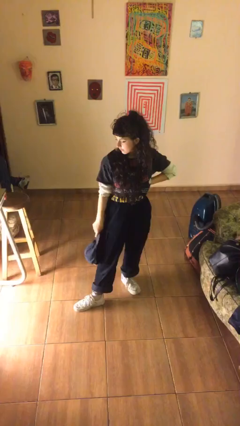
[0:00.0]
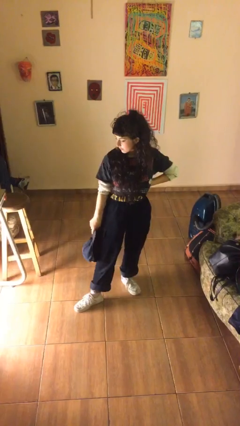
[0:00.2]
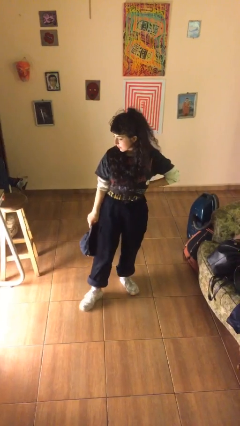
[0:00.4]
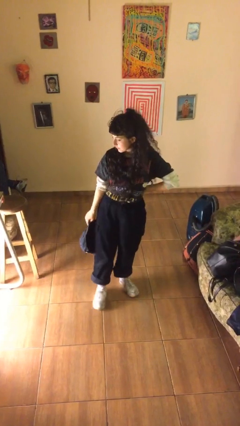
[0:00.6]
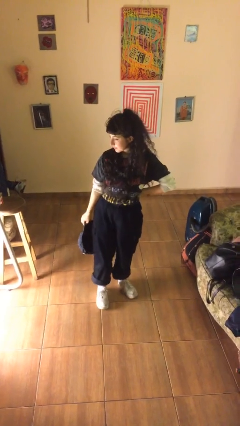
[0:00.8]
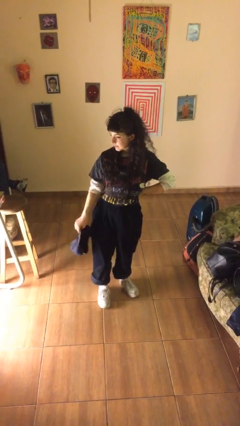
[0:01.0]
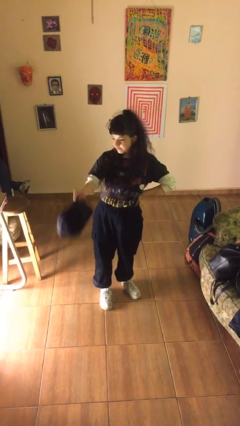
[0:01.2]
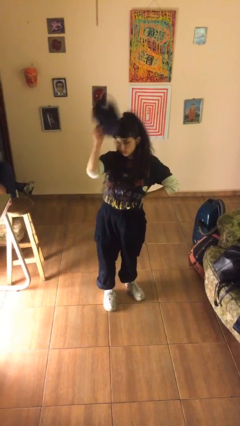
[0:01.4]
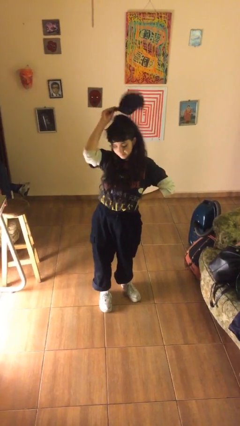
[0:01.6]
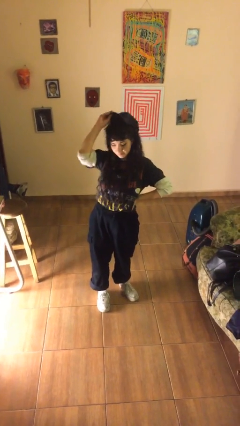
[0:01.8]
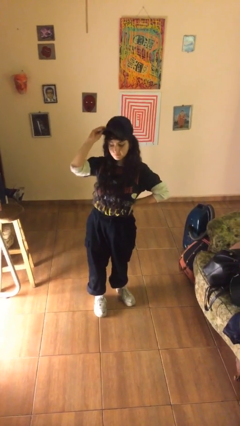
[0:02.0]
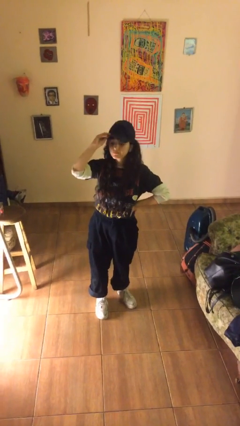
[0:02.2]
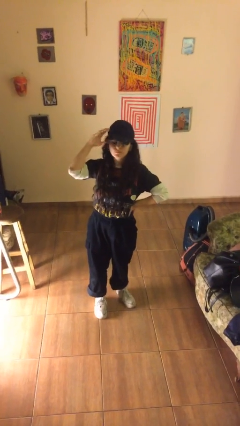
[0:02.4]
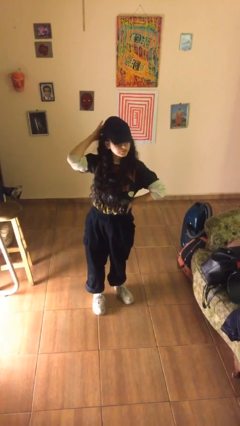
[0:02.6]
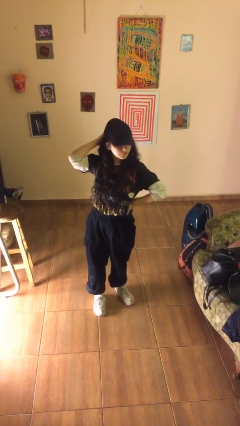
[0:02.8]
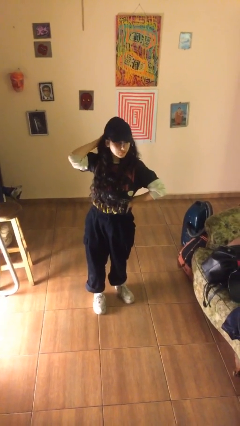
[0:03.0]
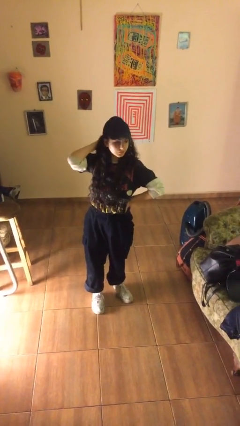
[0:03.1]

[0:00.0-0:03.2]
person puts on hat

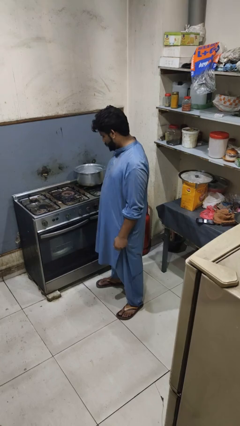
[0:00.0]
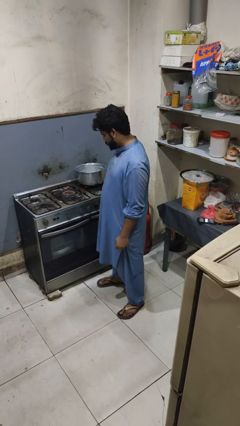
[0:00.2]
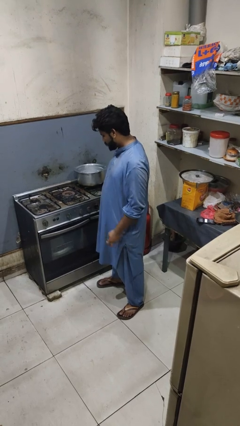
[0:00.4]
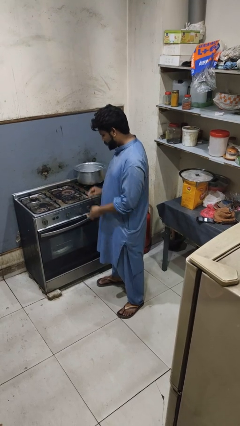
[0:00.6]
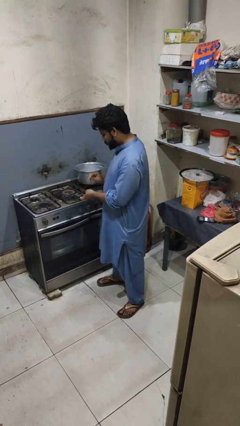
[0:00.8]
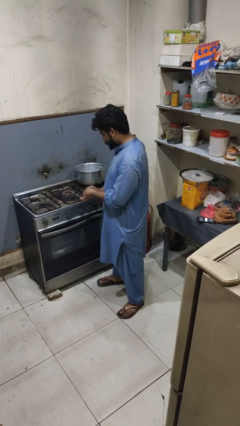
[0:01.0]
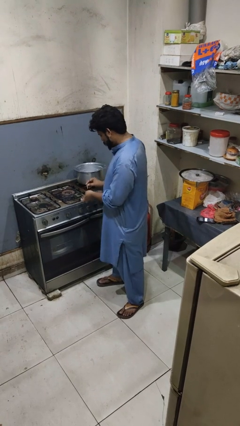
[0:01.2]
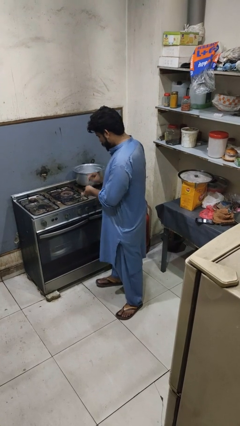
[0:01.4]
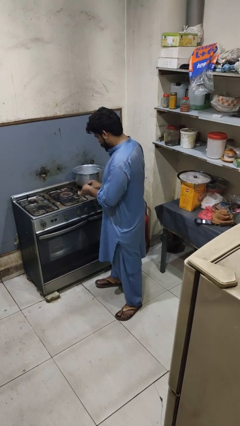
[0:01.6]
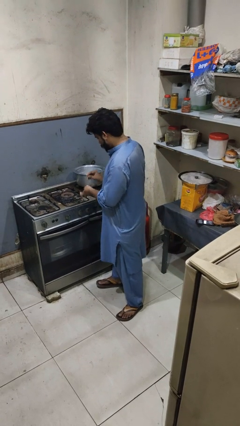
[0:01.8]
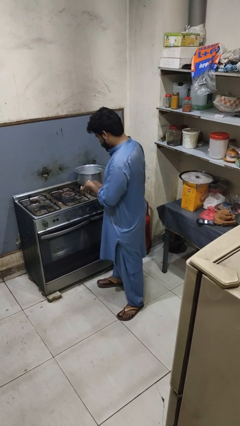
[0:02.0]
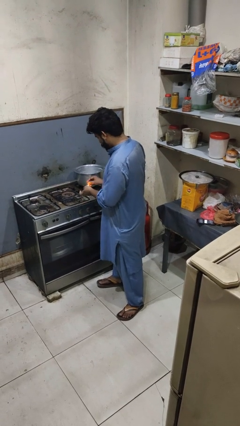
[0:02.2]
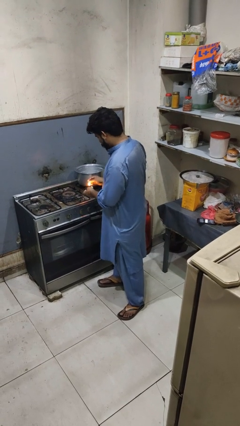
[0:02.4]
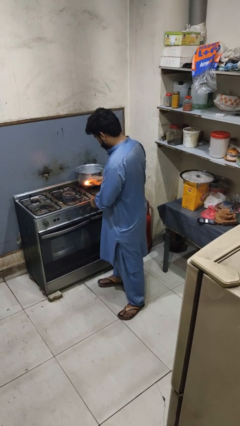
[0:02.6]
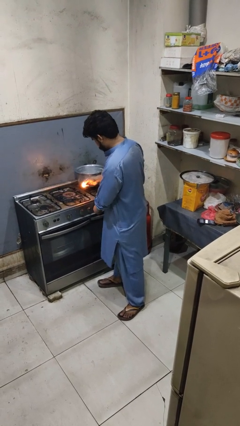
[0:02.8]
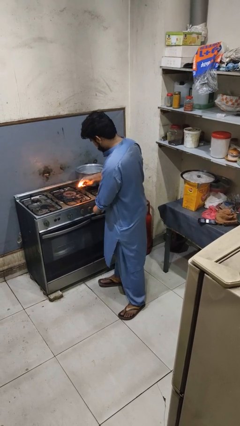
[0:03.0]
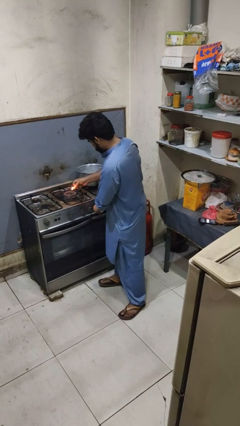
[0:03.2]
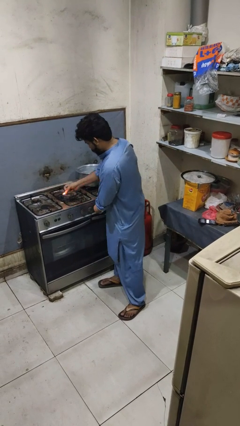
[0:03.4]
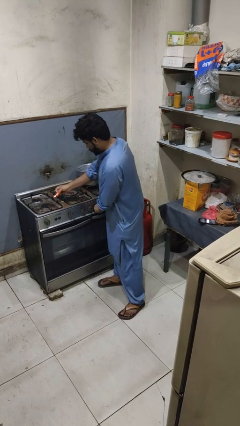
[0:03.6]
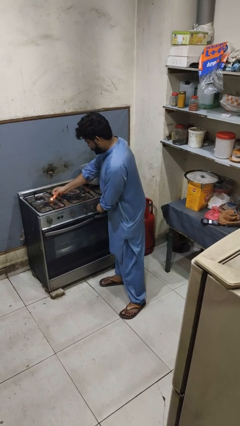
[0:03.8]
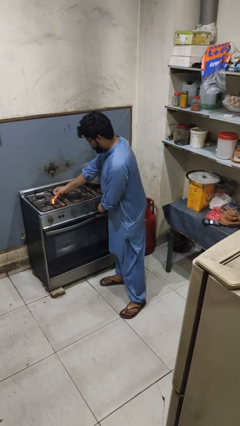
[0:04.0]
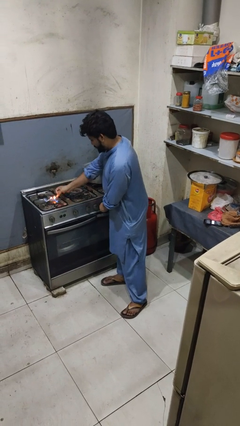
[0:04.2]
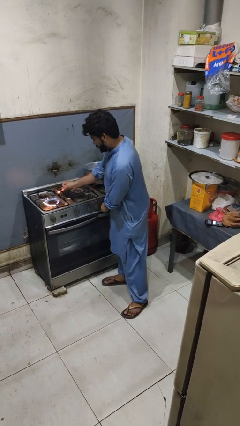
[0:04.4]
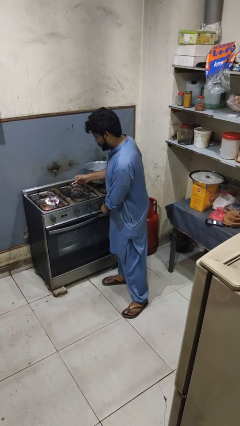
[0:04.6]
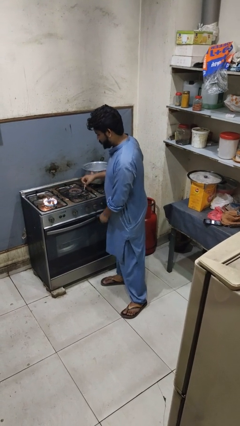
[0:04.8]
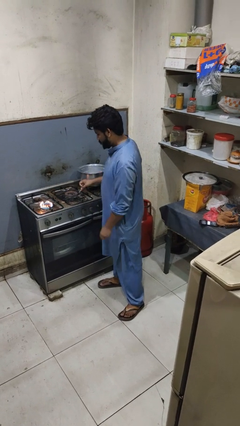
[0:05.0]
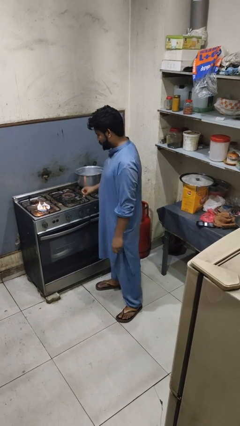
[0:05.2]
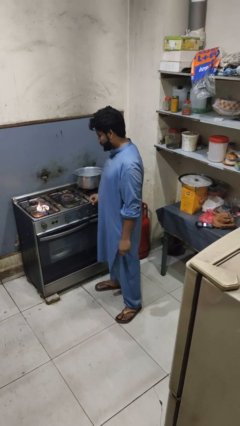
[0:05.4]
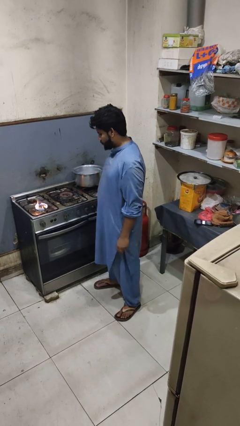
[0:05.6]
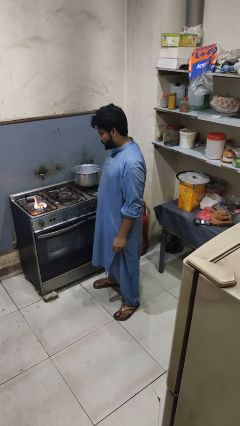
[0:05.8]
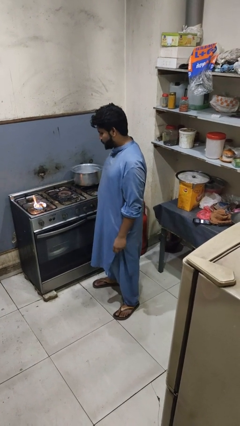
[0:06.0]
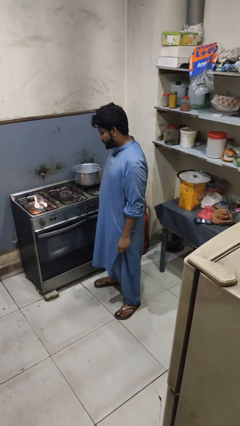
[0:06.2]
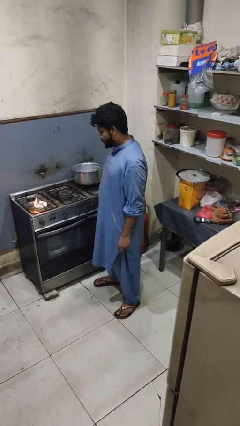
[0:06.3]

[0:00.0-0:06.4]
person turns on stovetop

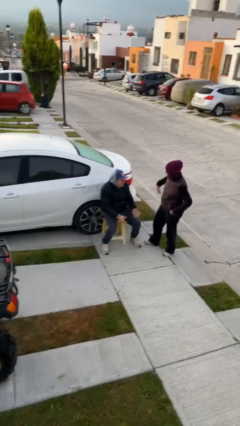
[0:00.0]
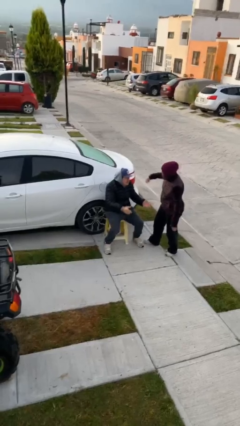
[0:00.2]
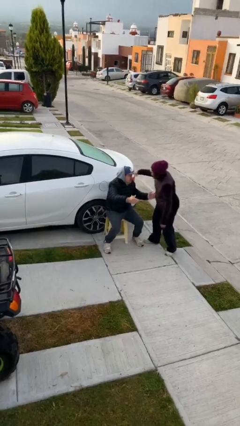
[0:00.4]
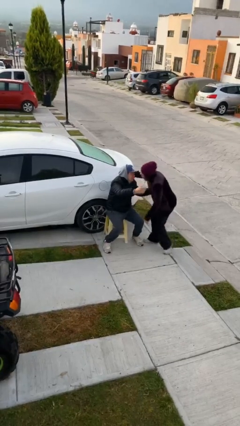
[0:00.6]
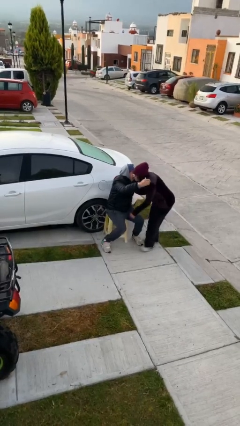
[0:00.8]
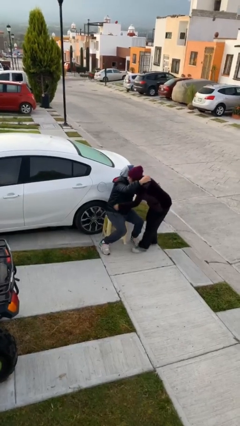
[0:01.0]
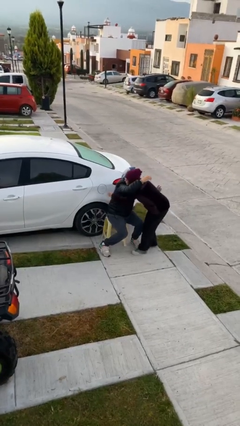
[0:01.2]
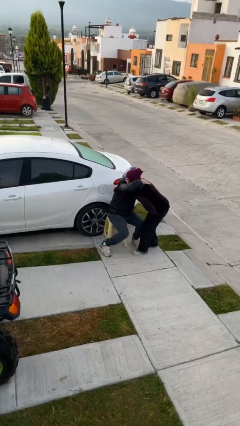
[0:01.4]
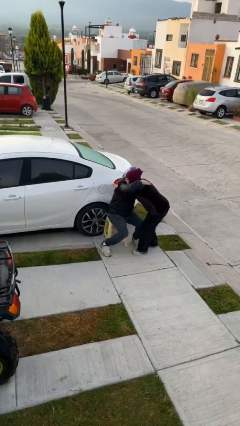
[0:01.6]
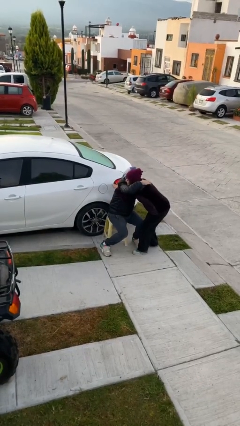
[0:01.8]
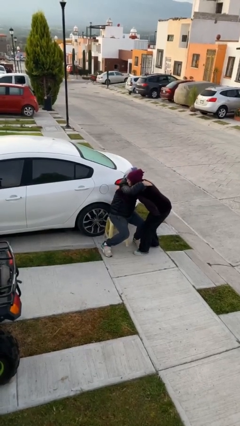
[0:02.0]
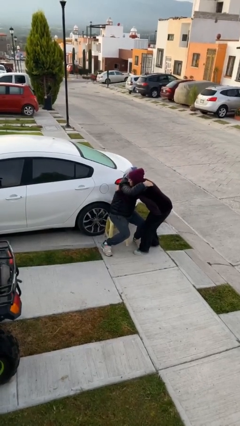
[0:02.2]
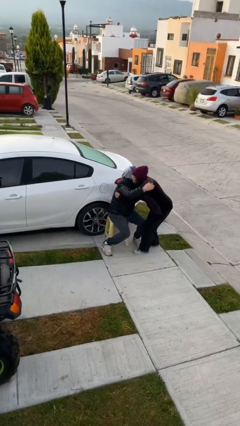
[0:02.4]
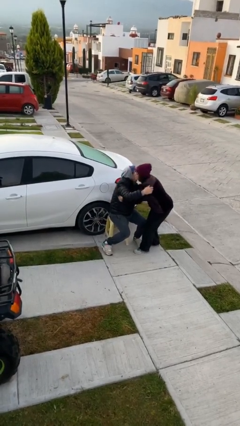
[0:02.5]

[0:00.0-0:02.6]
person embraces person

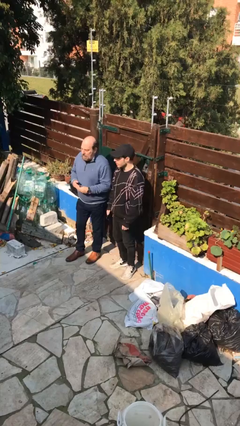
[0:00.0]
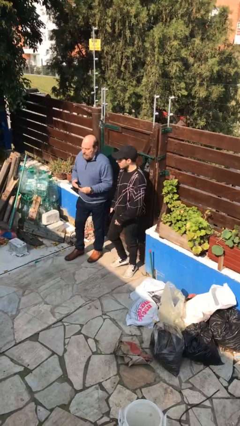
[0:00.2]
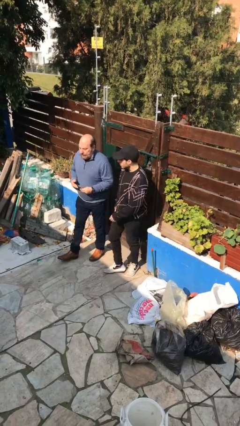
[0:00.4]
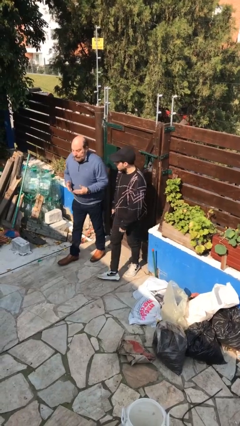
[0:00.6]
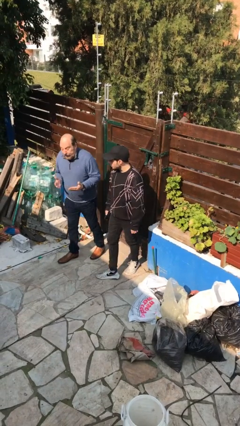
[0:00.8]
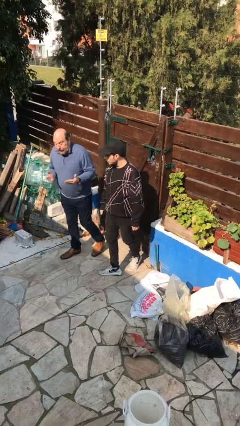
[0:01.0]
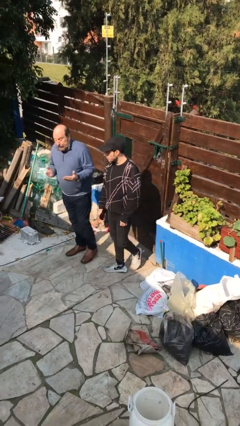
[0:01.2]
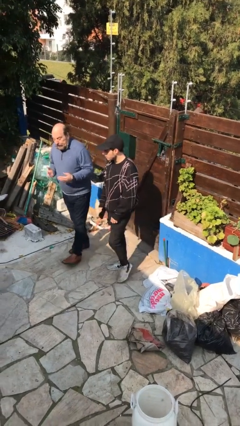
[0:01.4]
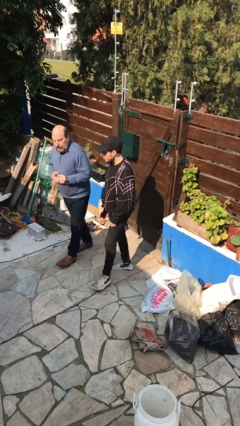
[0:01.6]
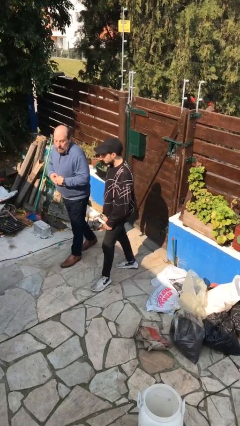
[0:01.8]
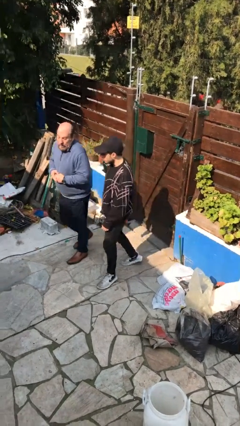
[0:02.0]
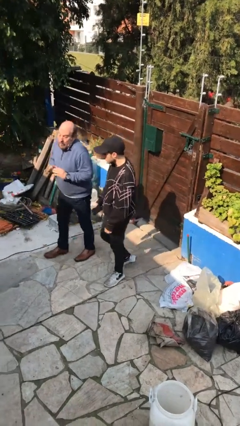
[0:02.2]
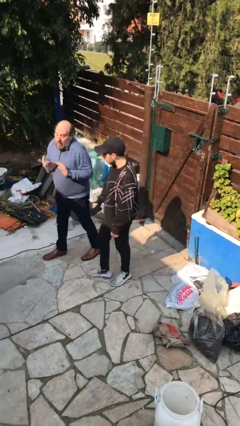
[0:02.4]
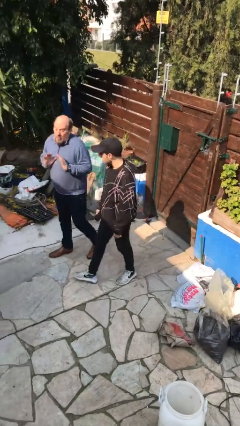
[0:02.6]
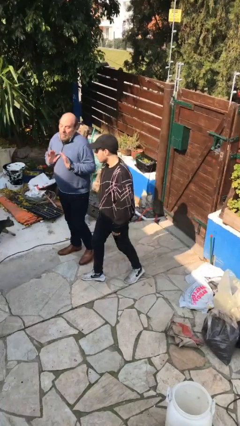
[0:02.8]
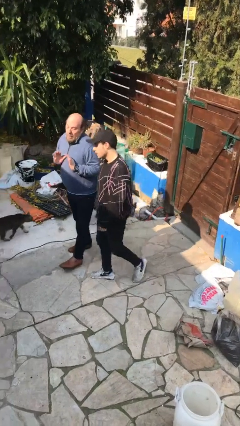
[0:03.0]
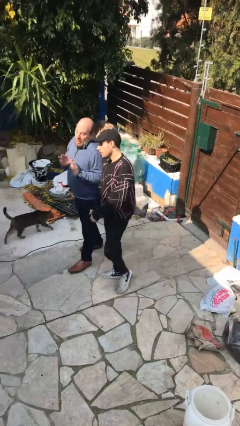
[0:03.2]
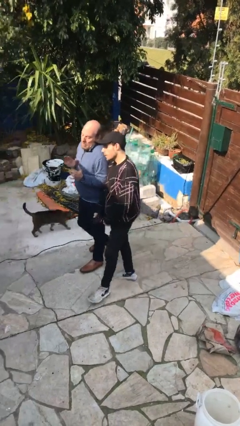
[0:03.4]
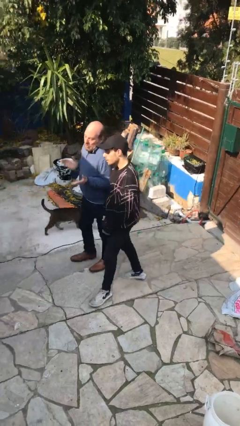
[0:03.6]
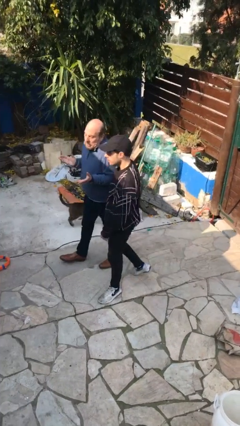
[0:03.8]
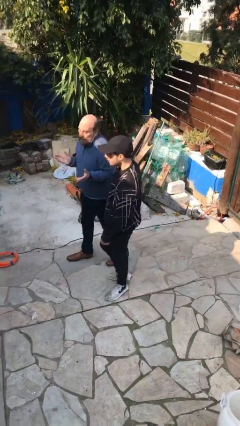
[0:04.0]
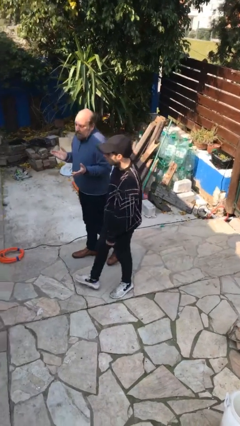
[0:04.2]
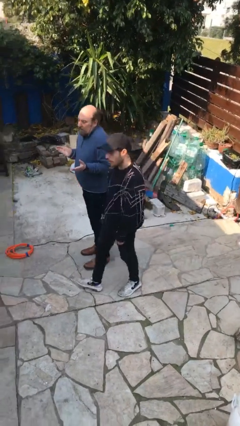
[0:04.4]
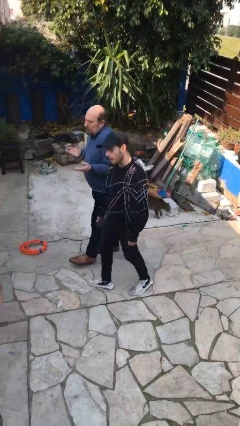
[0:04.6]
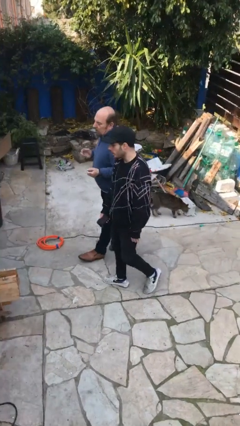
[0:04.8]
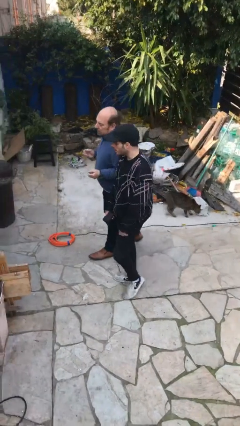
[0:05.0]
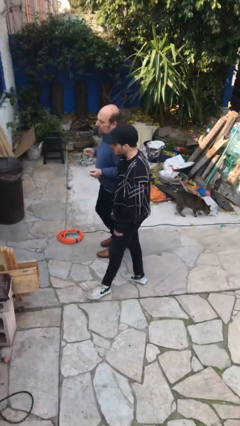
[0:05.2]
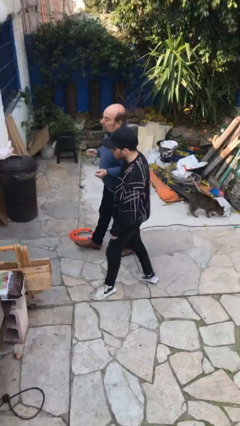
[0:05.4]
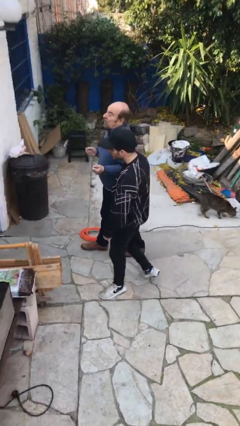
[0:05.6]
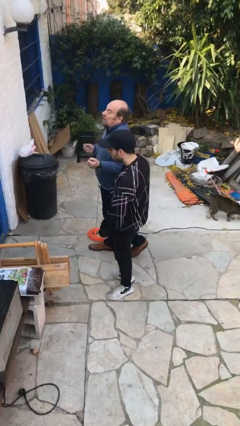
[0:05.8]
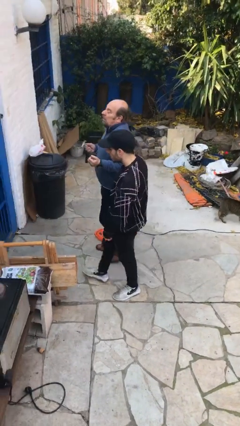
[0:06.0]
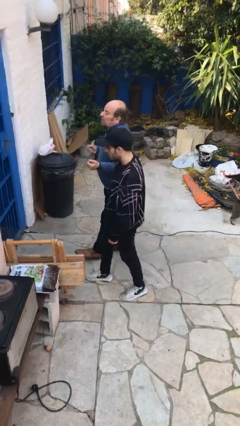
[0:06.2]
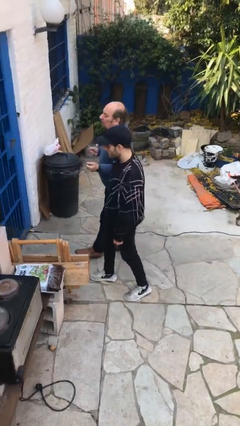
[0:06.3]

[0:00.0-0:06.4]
person talks to person
